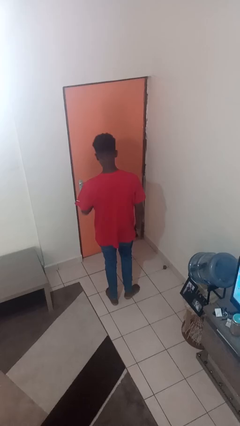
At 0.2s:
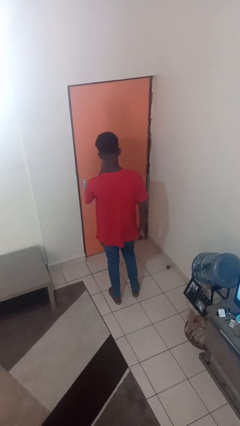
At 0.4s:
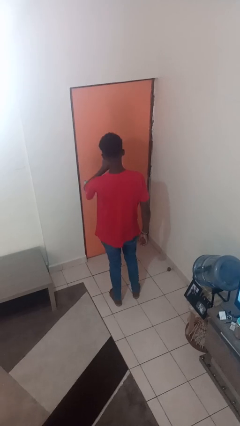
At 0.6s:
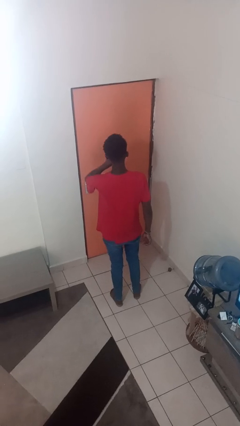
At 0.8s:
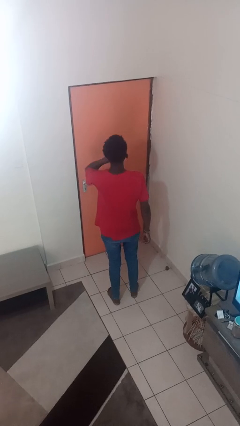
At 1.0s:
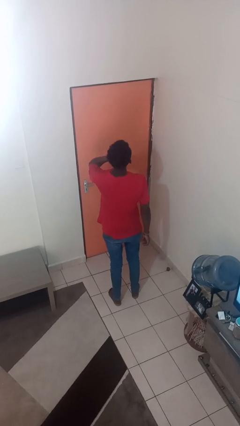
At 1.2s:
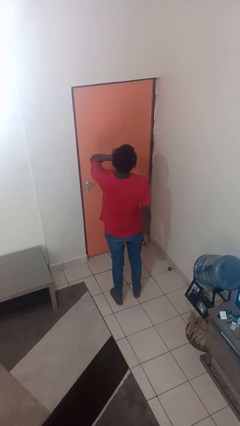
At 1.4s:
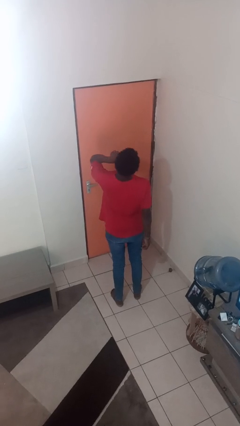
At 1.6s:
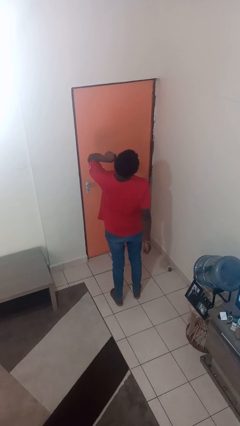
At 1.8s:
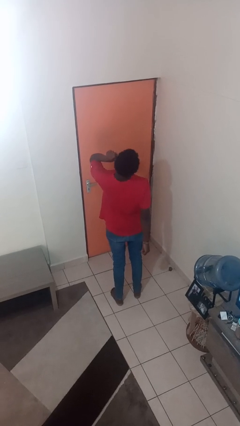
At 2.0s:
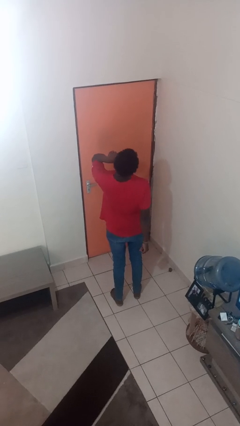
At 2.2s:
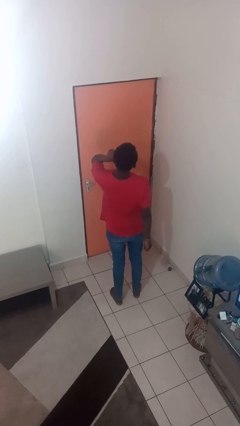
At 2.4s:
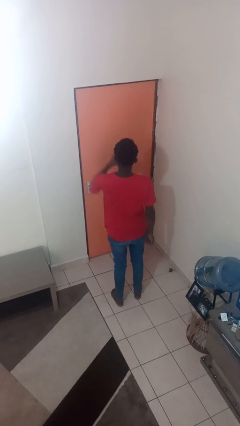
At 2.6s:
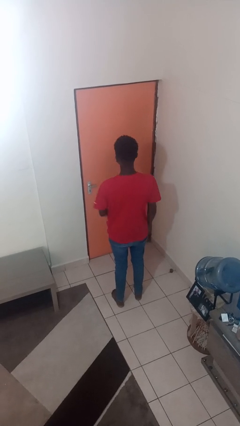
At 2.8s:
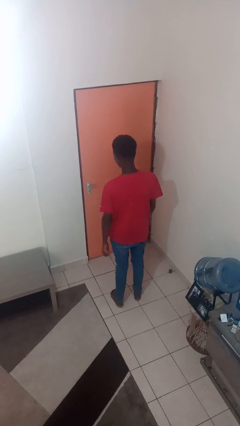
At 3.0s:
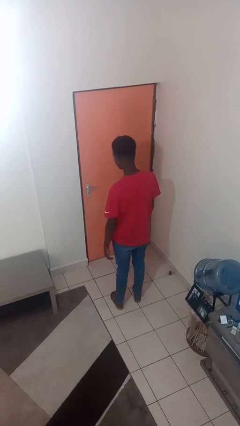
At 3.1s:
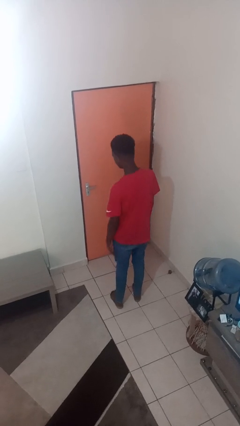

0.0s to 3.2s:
person yawns

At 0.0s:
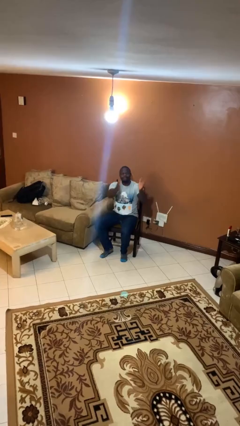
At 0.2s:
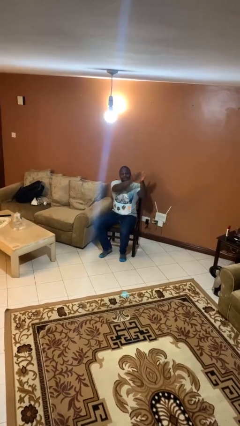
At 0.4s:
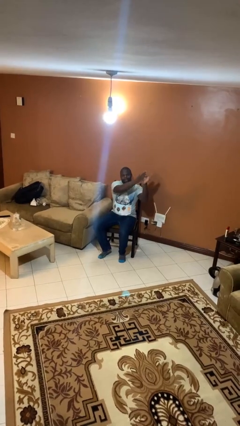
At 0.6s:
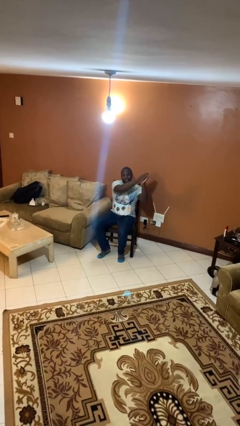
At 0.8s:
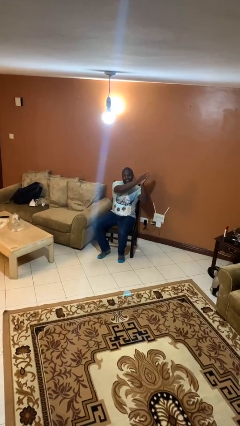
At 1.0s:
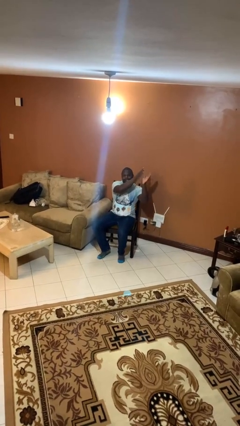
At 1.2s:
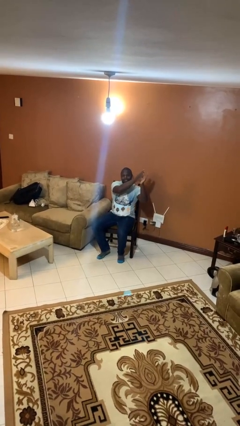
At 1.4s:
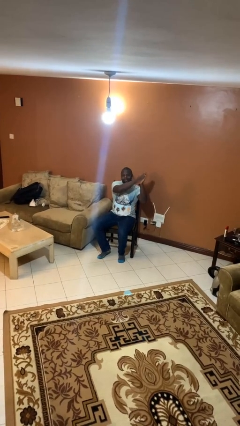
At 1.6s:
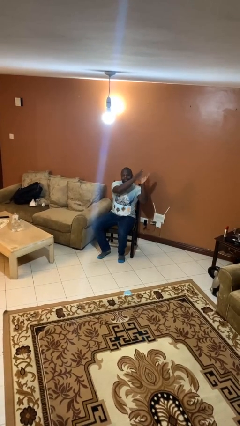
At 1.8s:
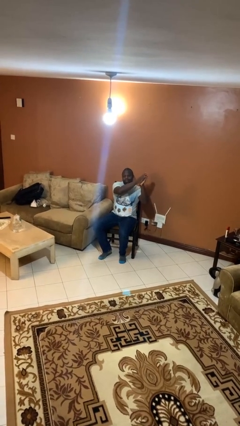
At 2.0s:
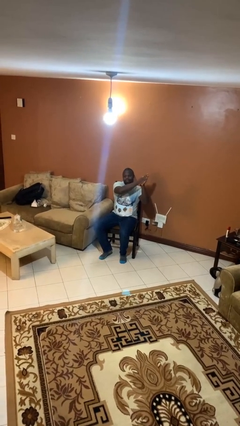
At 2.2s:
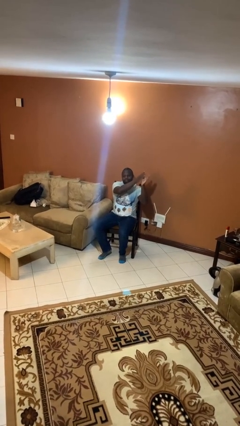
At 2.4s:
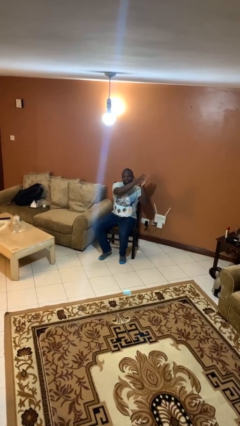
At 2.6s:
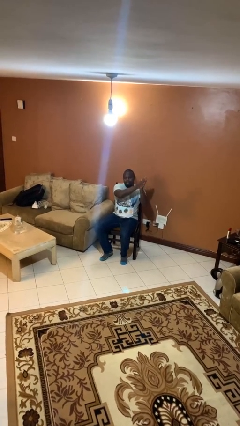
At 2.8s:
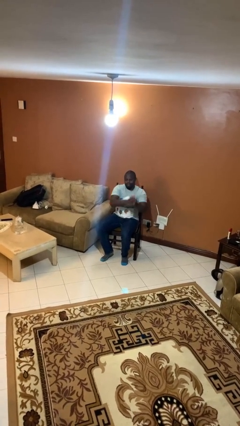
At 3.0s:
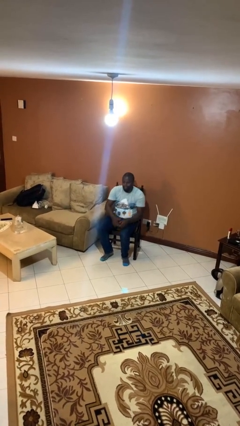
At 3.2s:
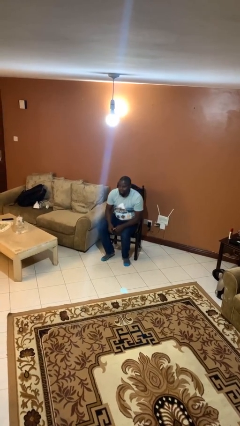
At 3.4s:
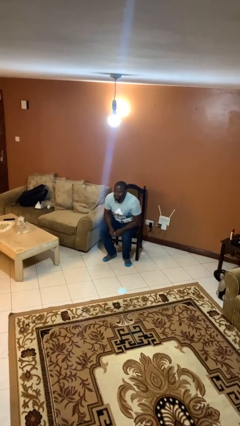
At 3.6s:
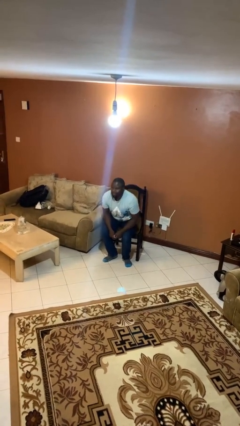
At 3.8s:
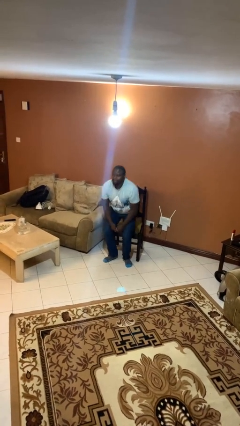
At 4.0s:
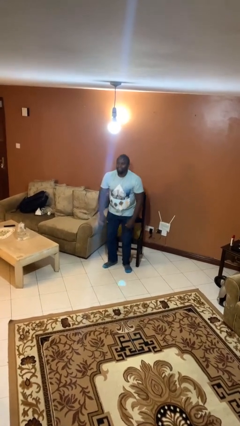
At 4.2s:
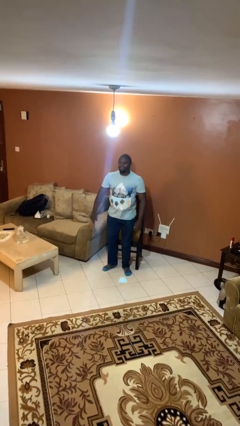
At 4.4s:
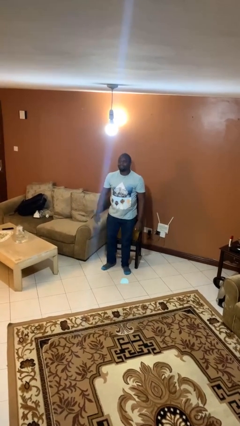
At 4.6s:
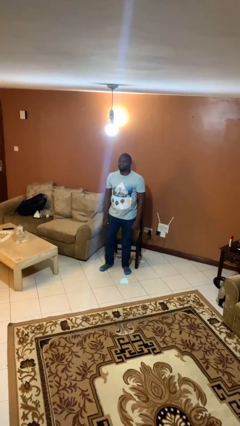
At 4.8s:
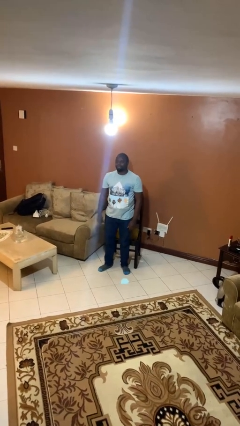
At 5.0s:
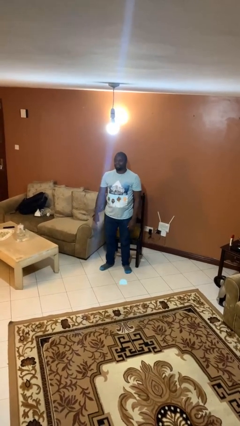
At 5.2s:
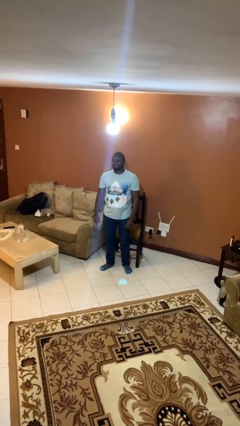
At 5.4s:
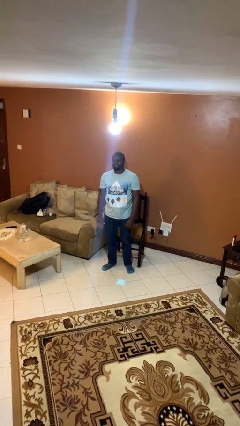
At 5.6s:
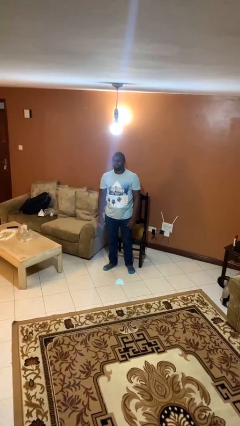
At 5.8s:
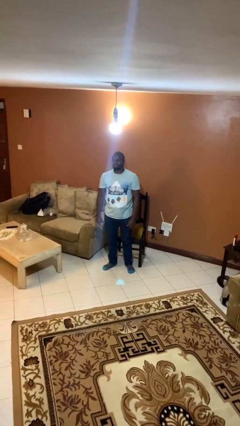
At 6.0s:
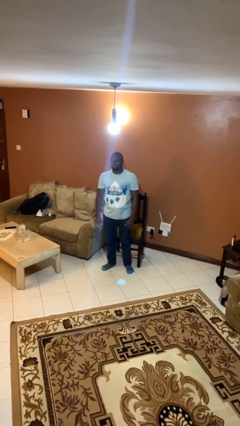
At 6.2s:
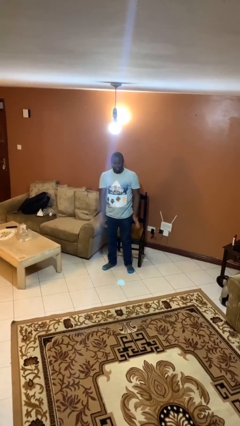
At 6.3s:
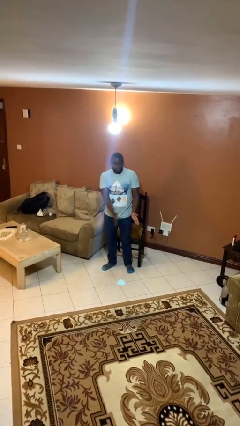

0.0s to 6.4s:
person claps hands

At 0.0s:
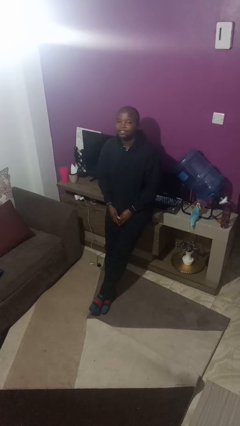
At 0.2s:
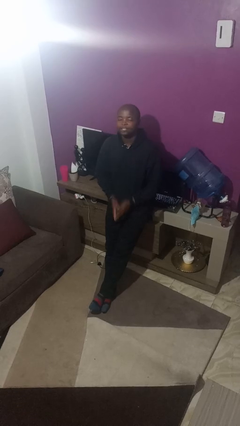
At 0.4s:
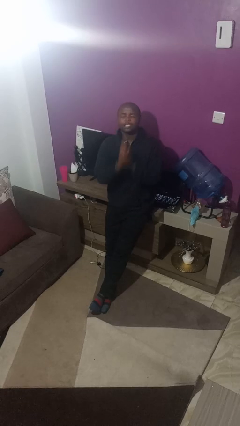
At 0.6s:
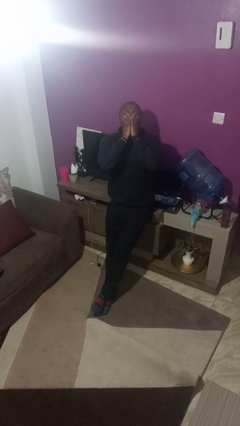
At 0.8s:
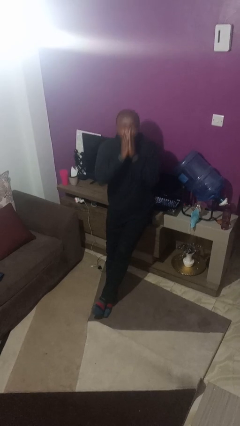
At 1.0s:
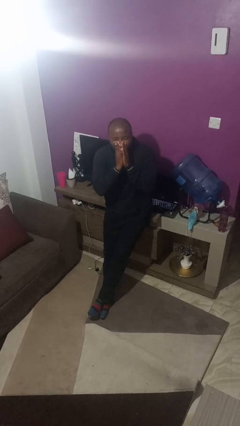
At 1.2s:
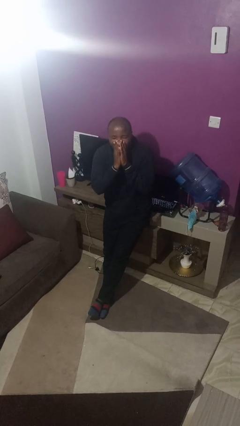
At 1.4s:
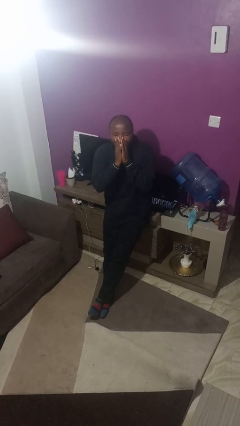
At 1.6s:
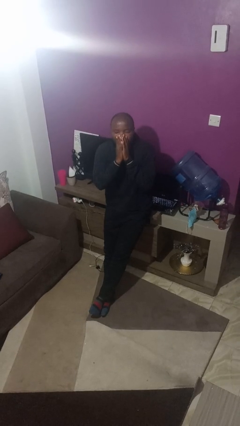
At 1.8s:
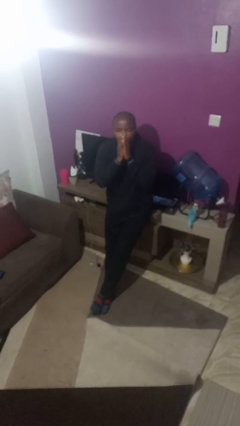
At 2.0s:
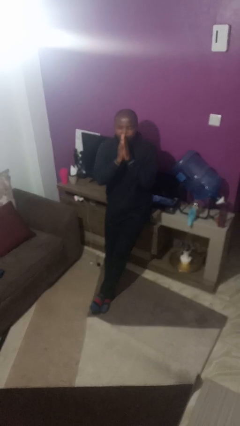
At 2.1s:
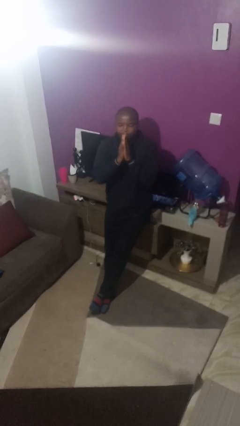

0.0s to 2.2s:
person sneezes into hand

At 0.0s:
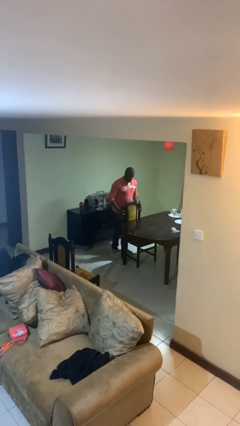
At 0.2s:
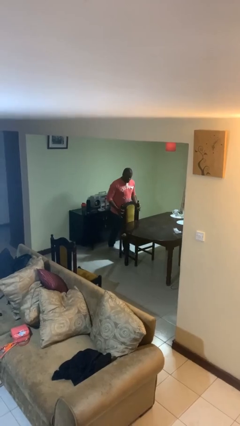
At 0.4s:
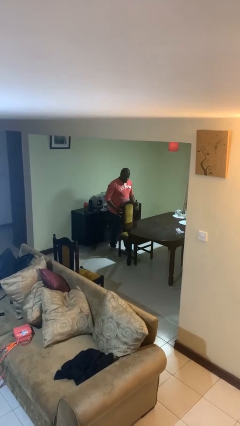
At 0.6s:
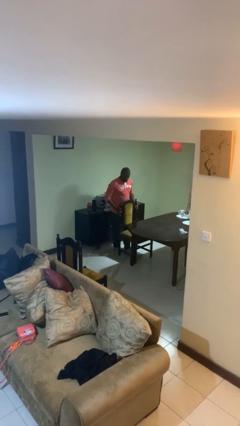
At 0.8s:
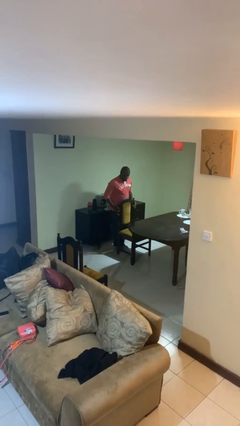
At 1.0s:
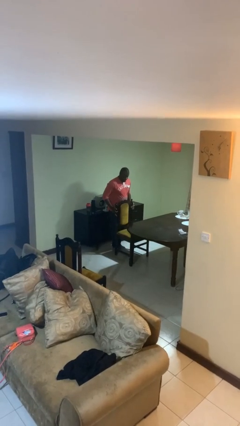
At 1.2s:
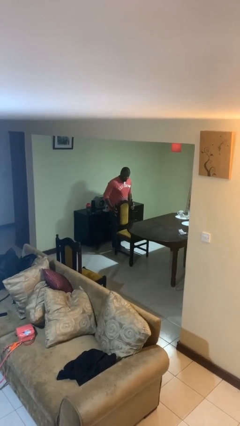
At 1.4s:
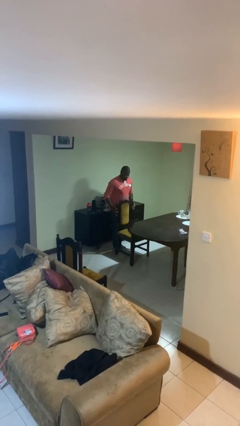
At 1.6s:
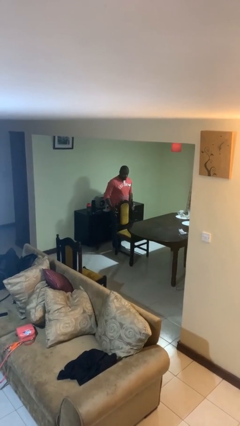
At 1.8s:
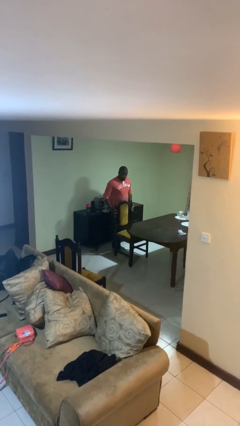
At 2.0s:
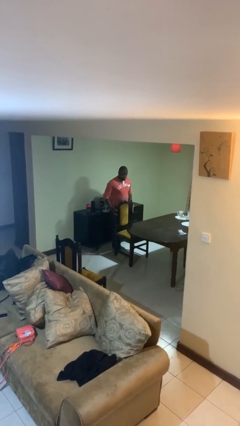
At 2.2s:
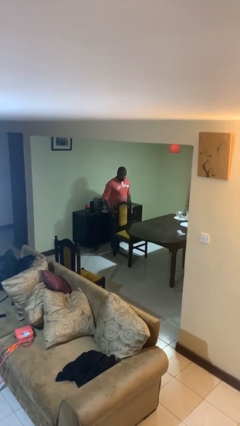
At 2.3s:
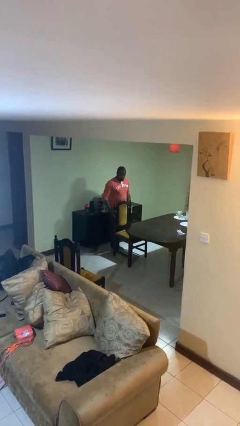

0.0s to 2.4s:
person pulls out chair

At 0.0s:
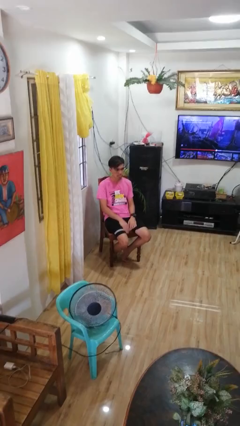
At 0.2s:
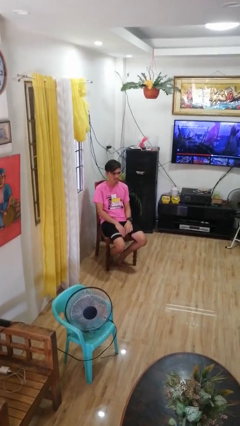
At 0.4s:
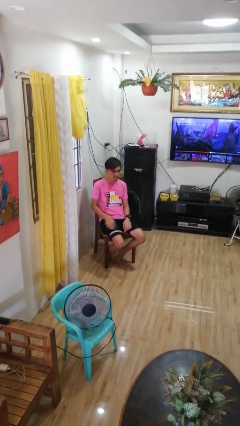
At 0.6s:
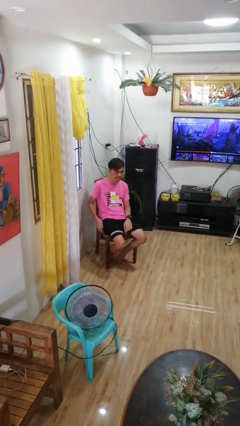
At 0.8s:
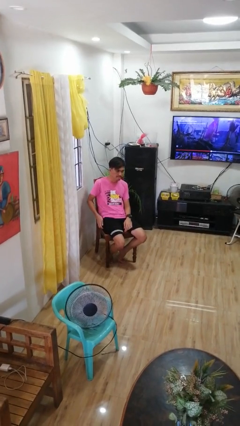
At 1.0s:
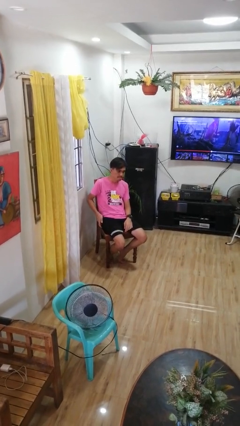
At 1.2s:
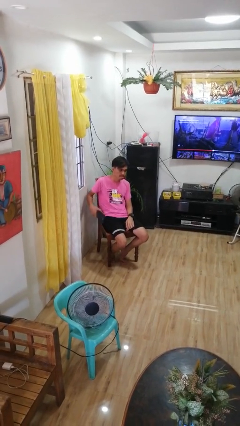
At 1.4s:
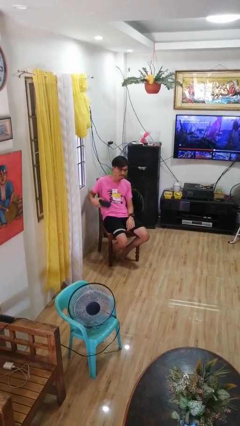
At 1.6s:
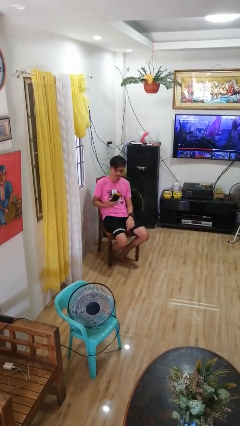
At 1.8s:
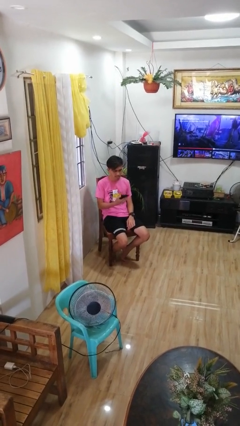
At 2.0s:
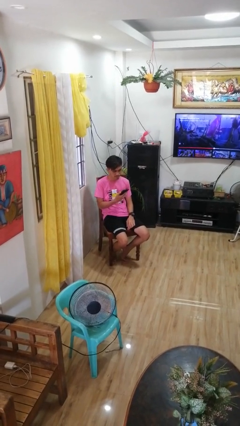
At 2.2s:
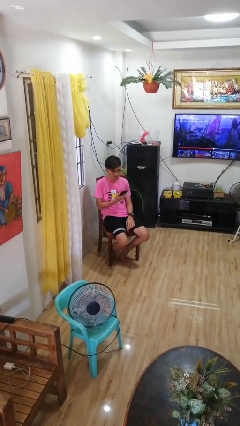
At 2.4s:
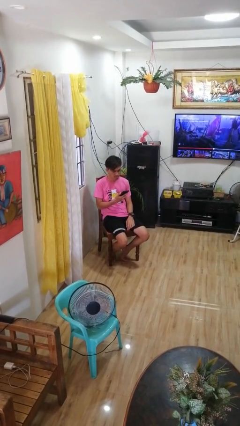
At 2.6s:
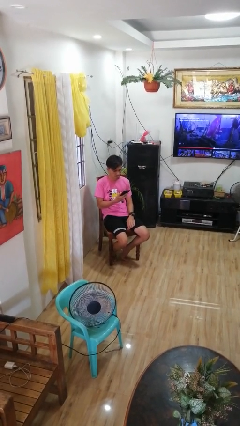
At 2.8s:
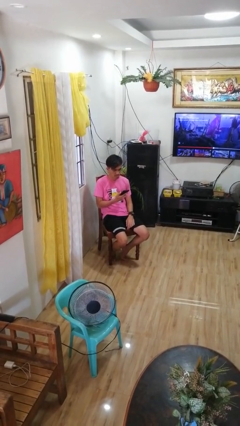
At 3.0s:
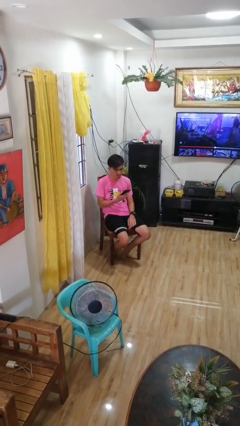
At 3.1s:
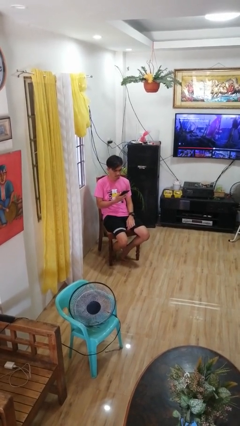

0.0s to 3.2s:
person takes phone from pocket
